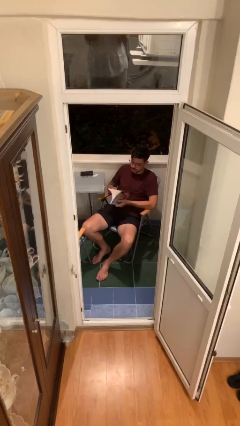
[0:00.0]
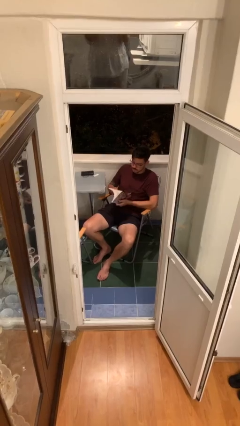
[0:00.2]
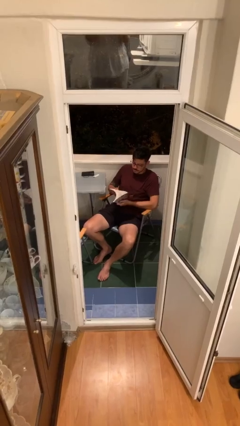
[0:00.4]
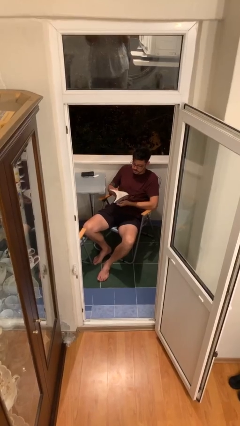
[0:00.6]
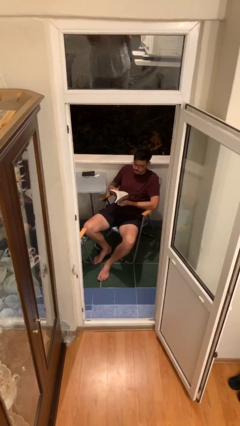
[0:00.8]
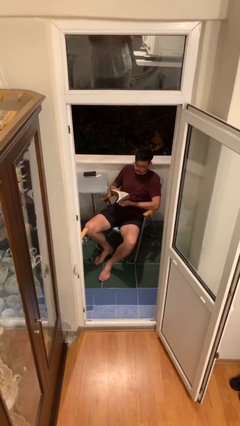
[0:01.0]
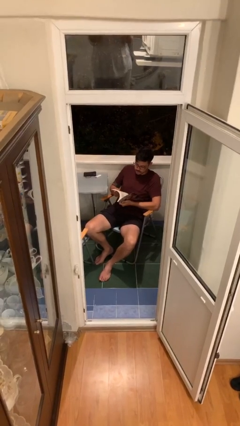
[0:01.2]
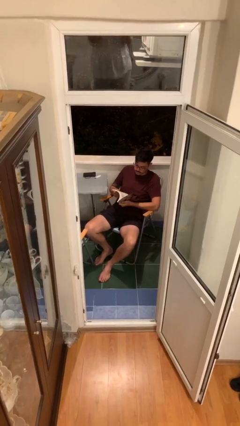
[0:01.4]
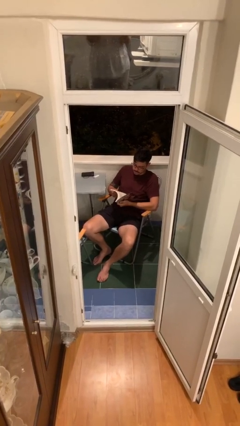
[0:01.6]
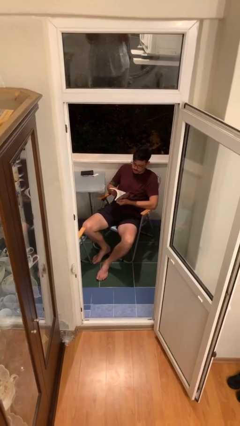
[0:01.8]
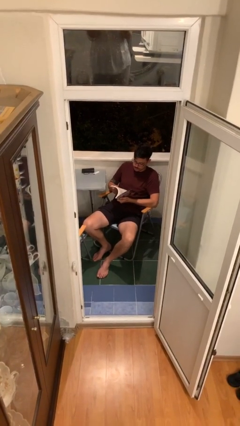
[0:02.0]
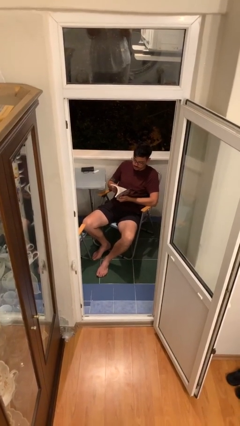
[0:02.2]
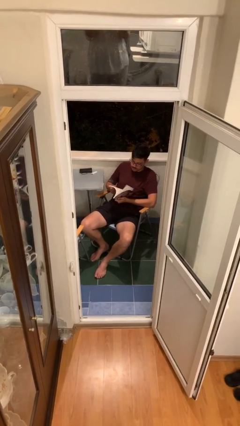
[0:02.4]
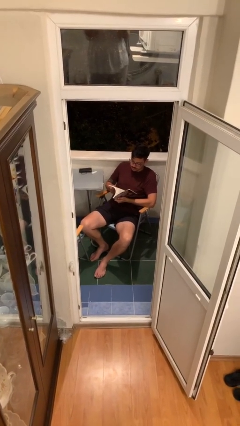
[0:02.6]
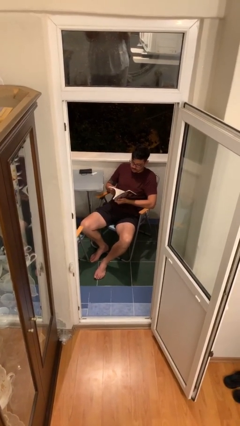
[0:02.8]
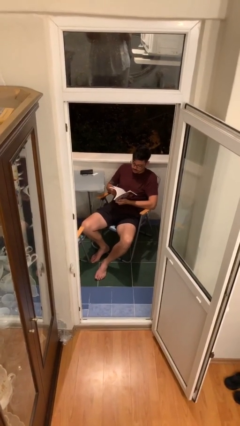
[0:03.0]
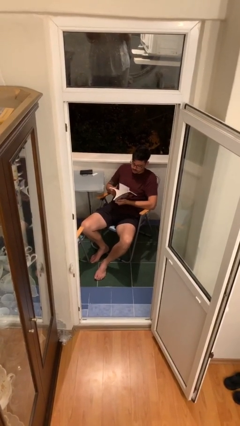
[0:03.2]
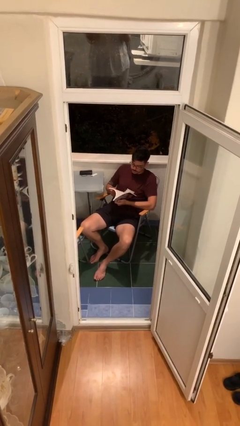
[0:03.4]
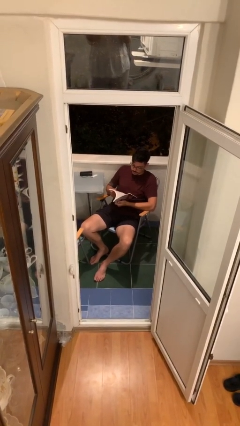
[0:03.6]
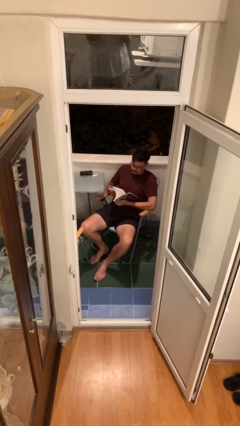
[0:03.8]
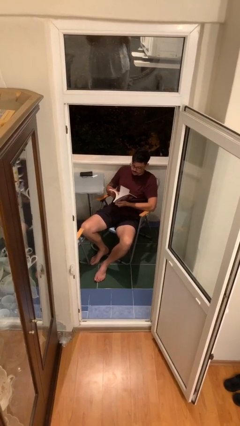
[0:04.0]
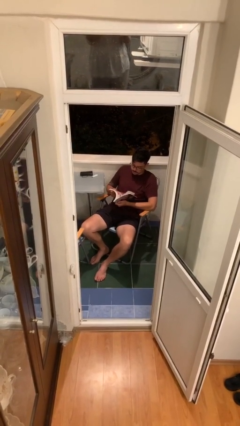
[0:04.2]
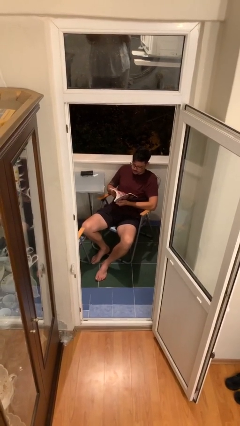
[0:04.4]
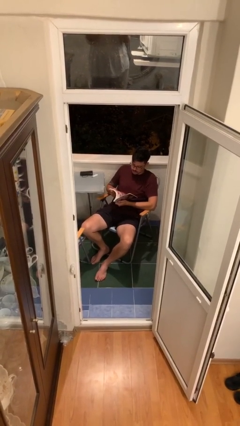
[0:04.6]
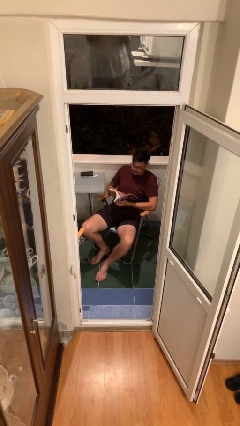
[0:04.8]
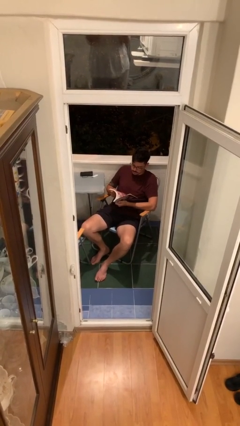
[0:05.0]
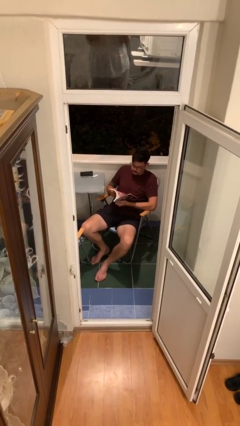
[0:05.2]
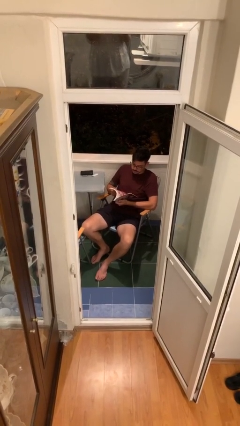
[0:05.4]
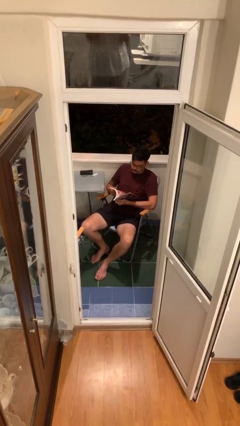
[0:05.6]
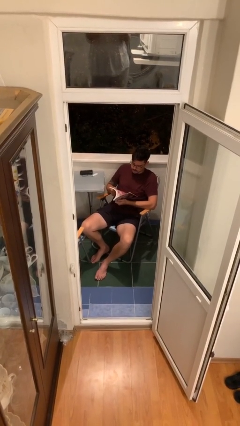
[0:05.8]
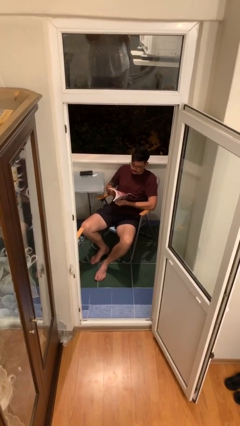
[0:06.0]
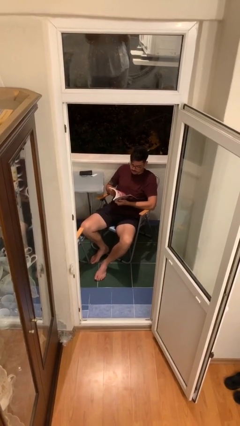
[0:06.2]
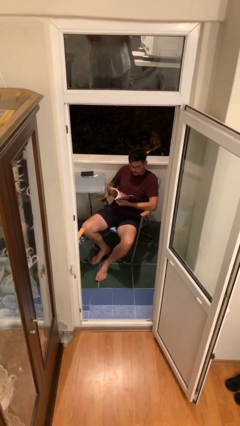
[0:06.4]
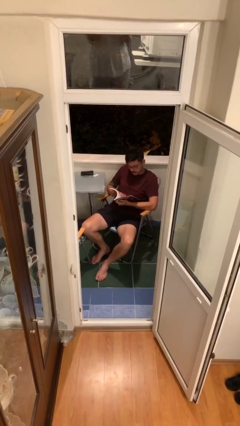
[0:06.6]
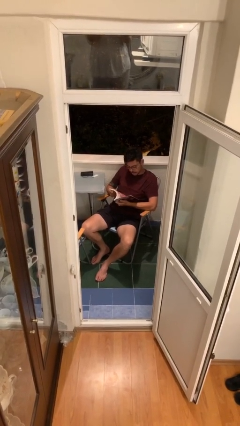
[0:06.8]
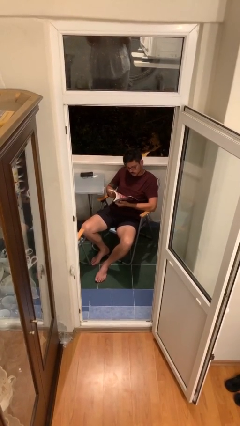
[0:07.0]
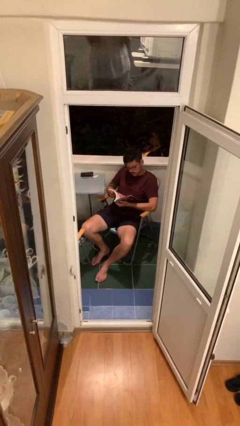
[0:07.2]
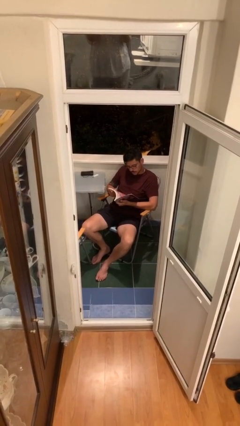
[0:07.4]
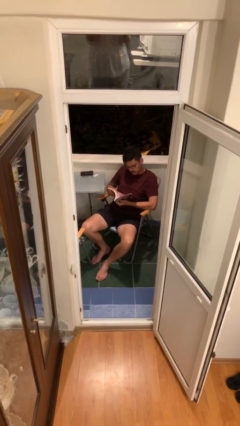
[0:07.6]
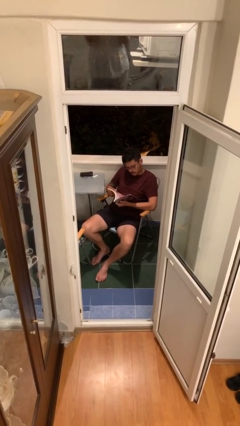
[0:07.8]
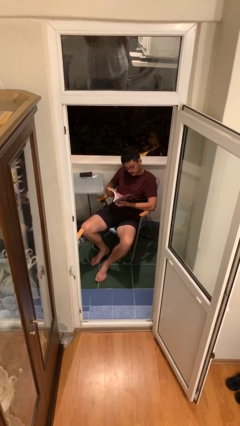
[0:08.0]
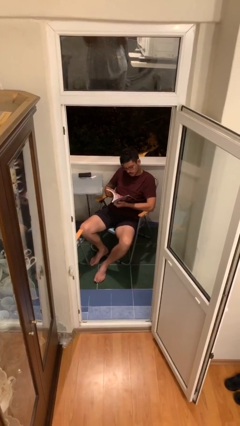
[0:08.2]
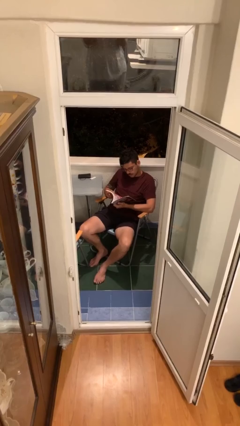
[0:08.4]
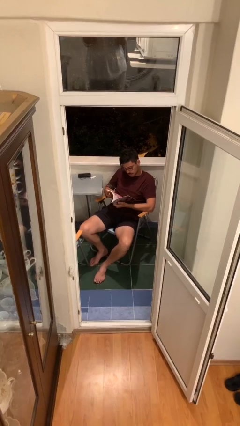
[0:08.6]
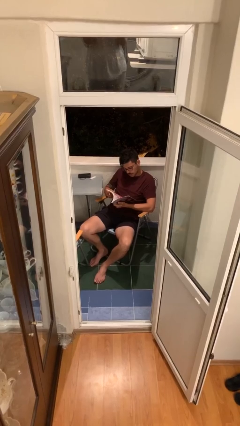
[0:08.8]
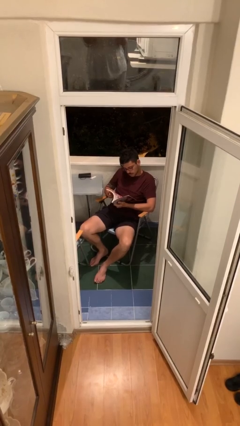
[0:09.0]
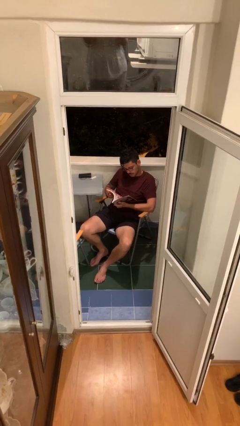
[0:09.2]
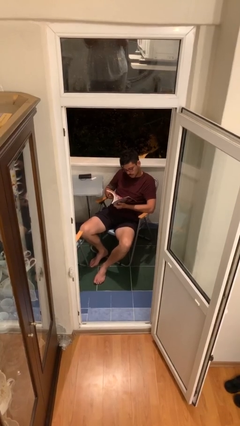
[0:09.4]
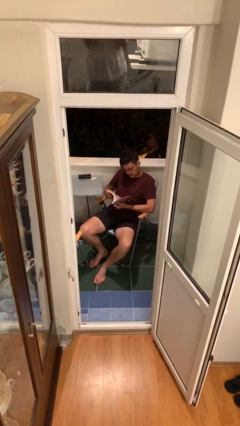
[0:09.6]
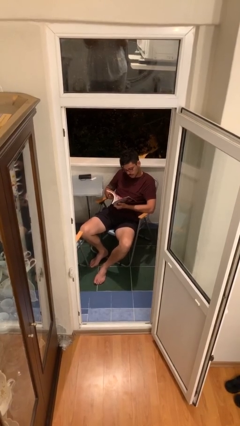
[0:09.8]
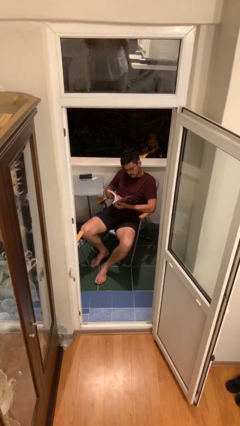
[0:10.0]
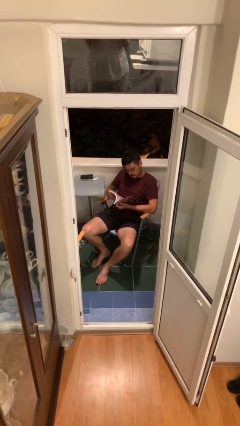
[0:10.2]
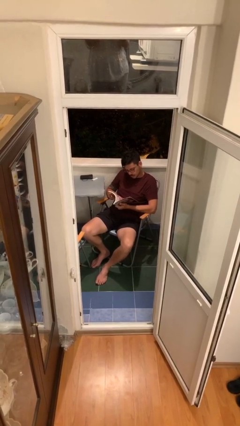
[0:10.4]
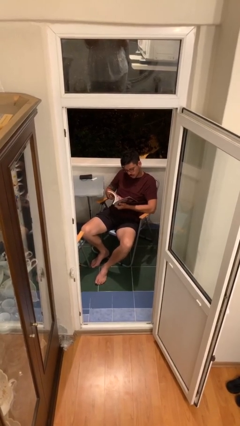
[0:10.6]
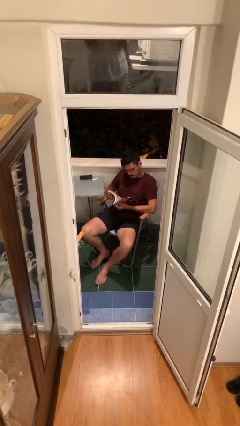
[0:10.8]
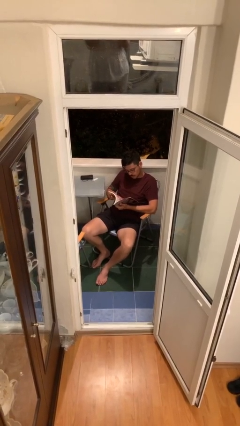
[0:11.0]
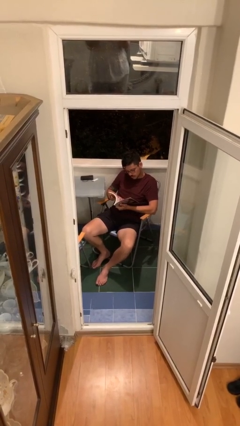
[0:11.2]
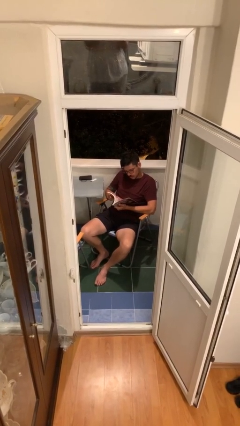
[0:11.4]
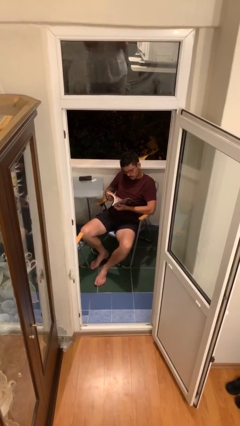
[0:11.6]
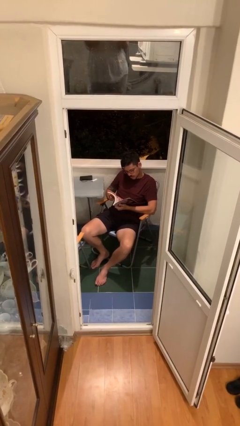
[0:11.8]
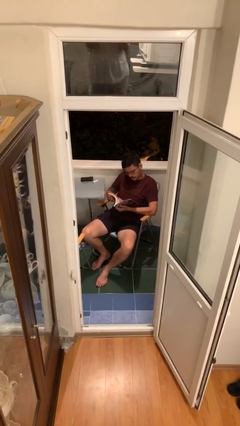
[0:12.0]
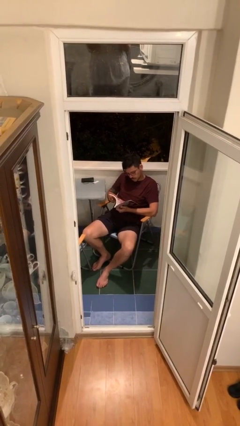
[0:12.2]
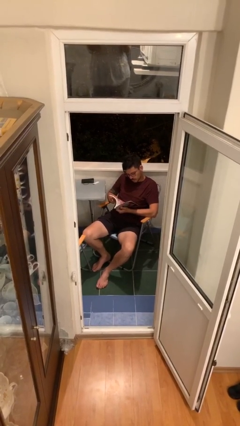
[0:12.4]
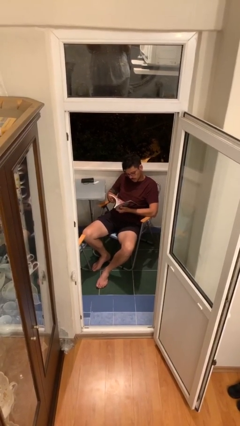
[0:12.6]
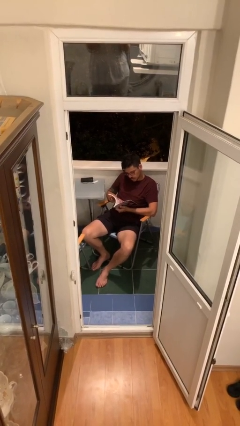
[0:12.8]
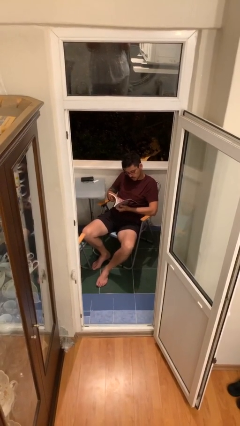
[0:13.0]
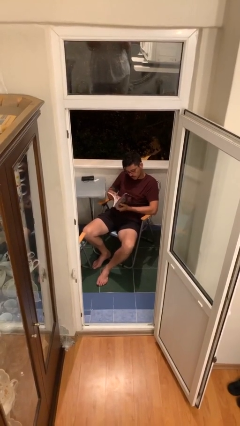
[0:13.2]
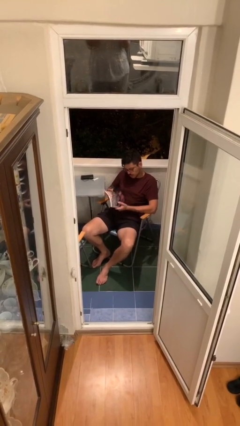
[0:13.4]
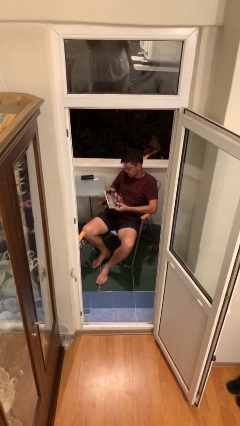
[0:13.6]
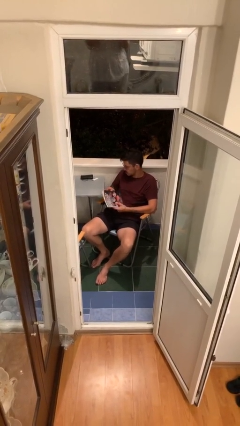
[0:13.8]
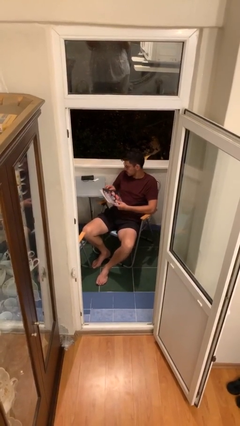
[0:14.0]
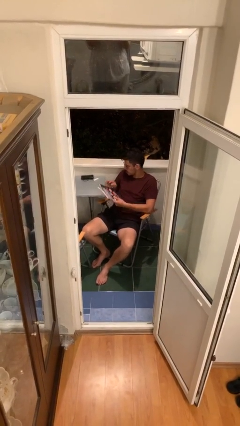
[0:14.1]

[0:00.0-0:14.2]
person reads document

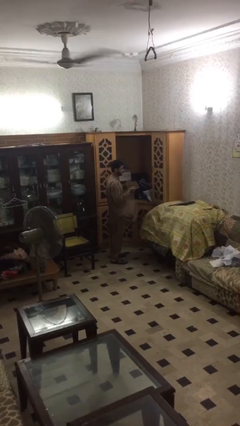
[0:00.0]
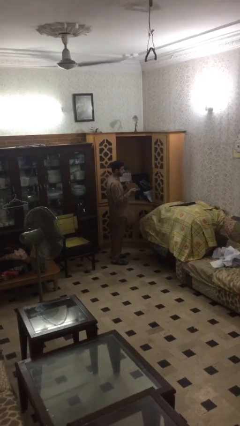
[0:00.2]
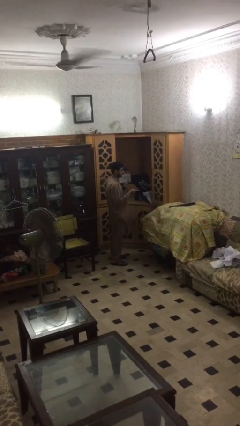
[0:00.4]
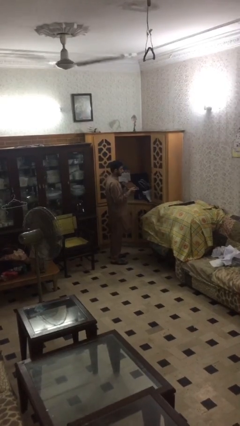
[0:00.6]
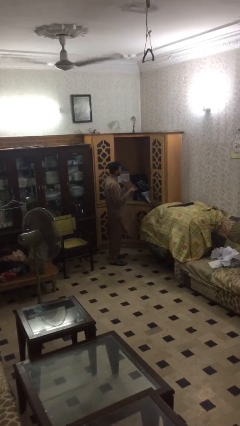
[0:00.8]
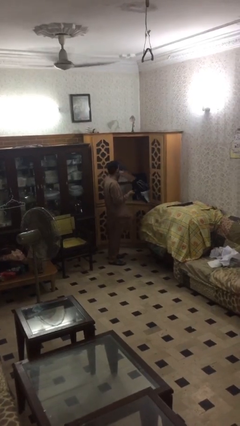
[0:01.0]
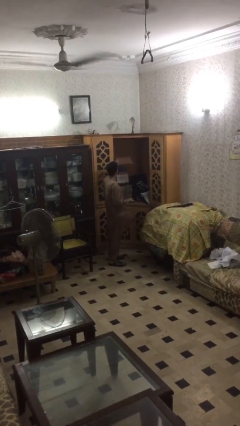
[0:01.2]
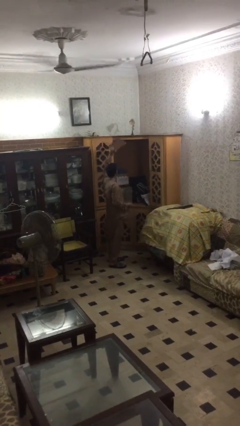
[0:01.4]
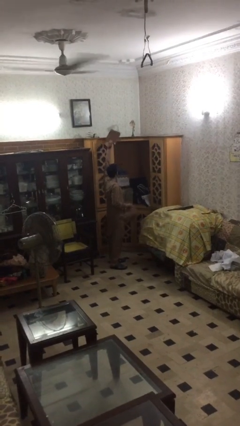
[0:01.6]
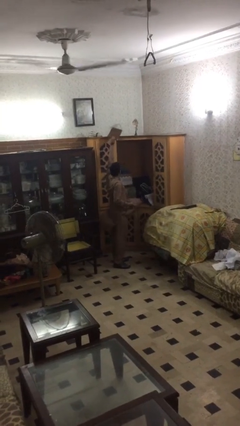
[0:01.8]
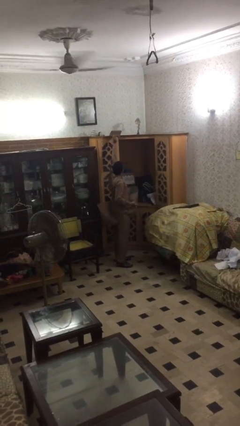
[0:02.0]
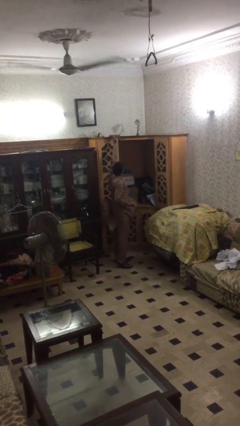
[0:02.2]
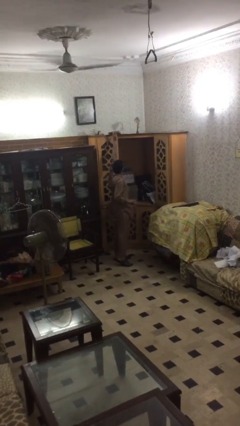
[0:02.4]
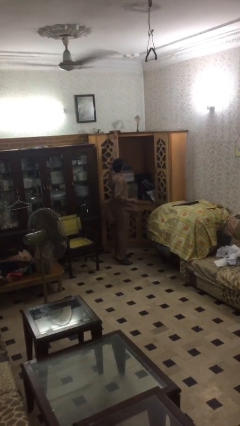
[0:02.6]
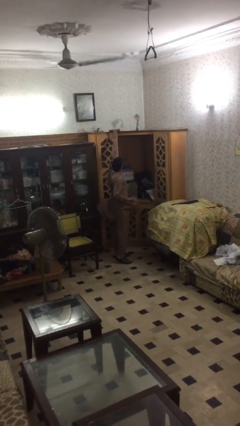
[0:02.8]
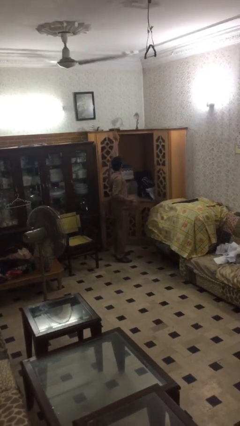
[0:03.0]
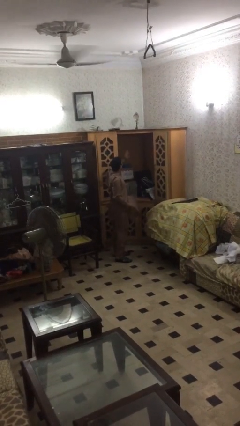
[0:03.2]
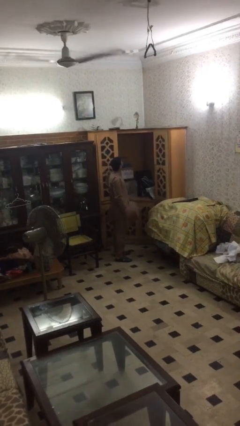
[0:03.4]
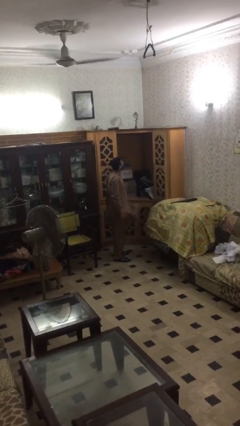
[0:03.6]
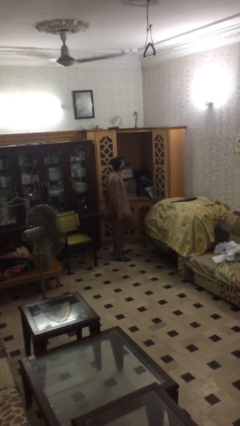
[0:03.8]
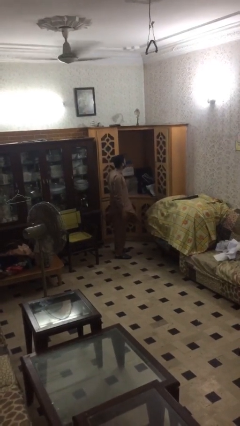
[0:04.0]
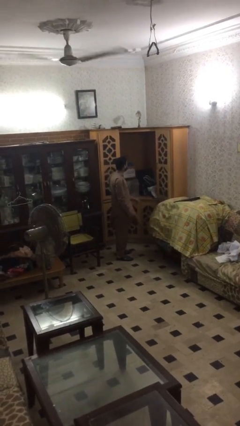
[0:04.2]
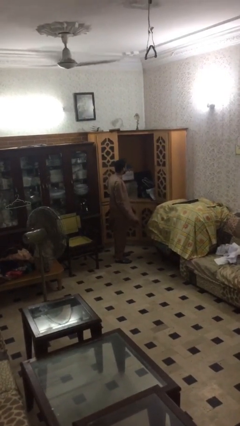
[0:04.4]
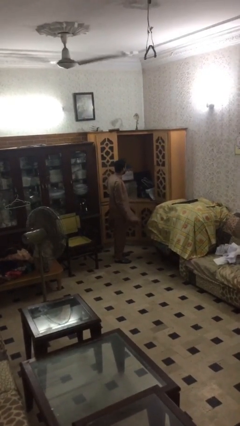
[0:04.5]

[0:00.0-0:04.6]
person puts down object on shelf
